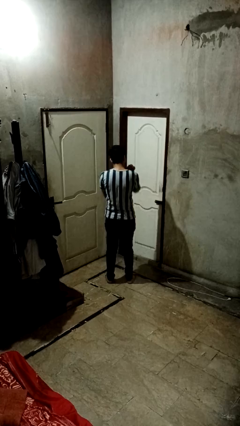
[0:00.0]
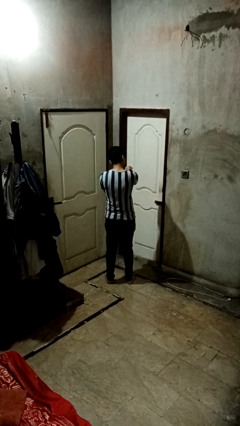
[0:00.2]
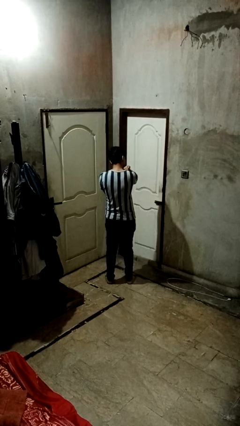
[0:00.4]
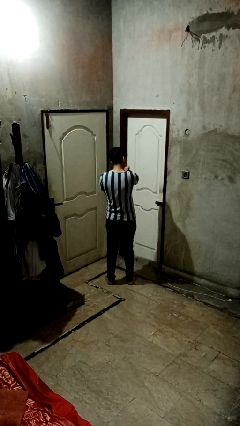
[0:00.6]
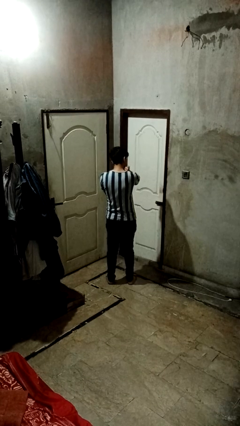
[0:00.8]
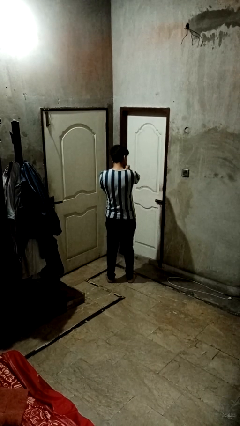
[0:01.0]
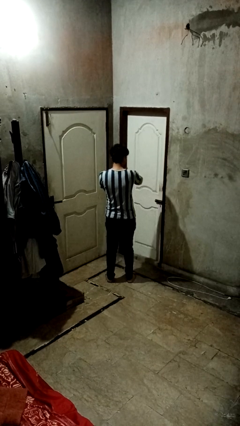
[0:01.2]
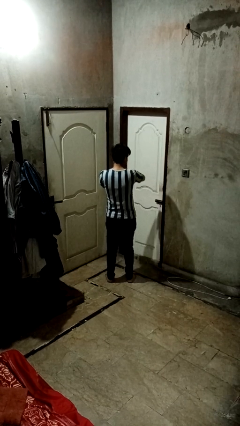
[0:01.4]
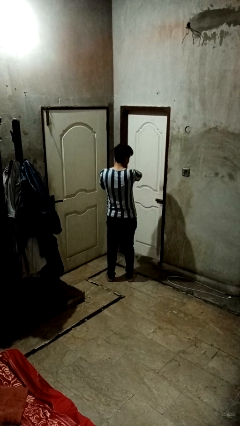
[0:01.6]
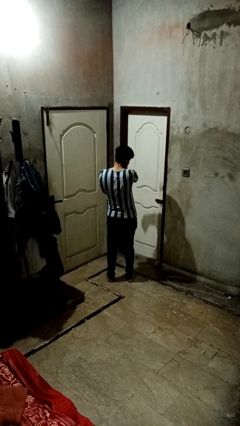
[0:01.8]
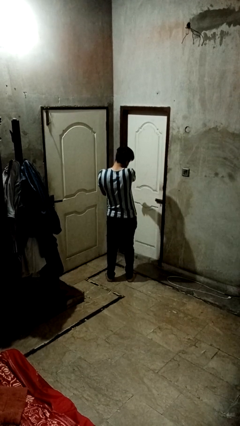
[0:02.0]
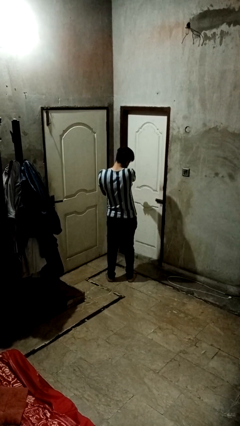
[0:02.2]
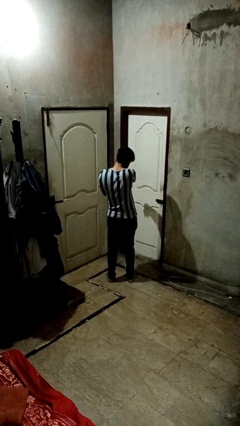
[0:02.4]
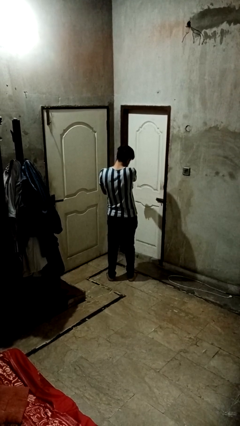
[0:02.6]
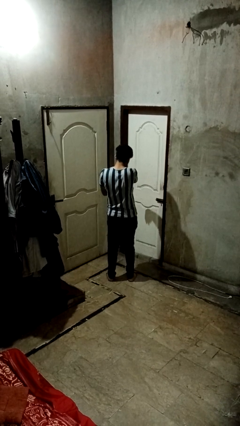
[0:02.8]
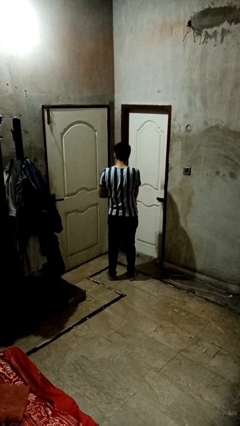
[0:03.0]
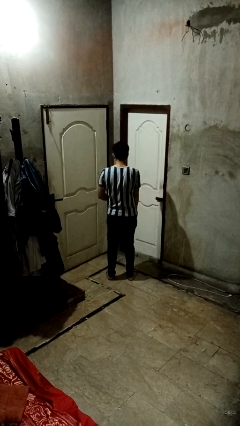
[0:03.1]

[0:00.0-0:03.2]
person swats bug

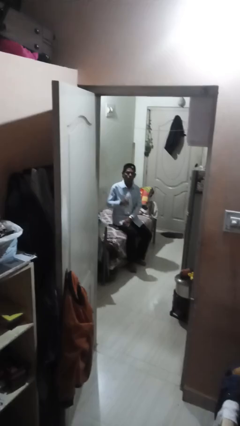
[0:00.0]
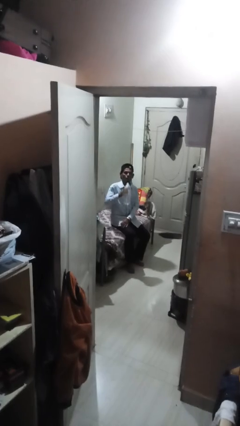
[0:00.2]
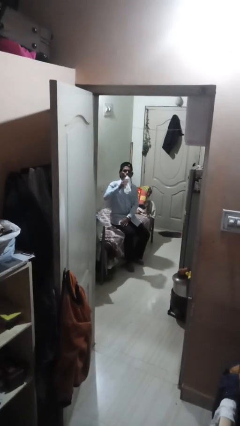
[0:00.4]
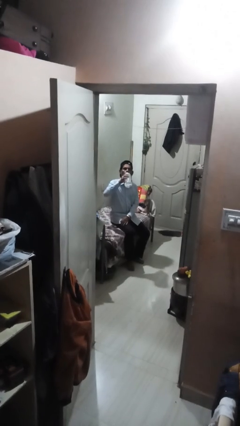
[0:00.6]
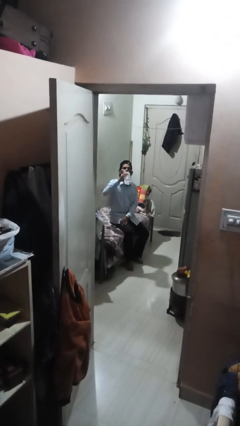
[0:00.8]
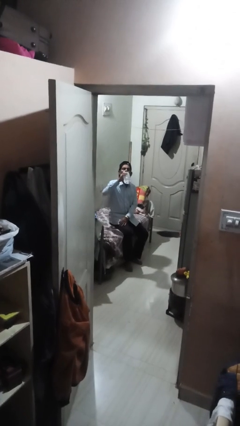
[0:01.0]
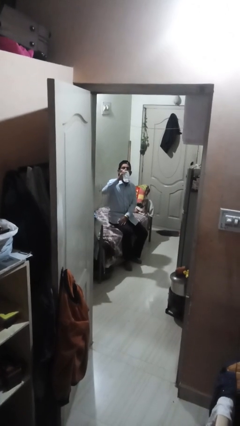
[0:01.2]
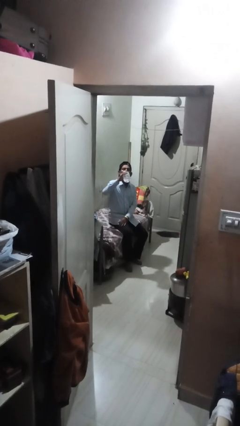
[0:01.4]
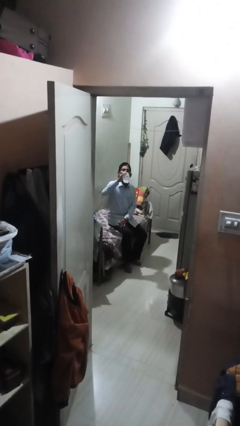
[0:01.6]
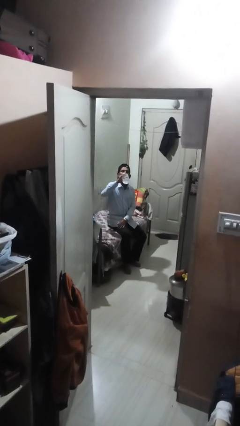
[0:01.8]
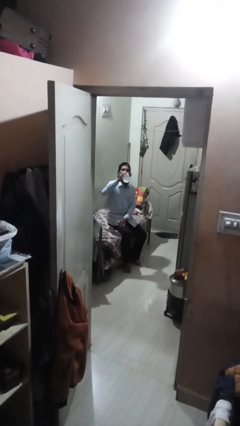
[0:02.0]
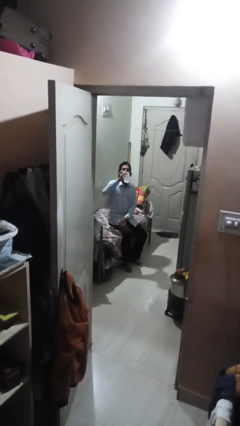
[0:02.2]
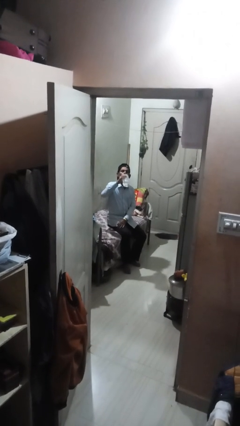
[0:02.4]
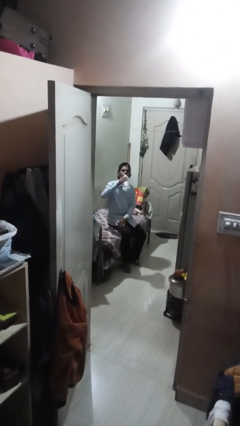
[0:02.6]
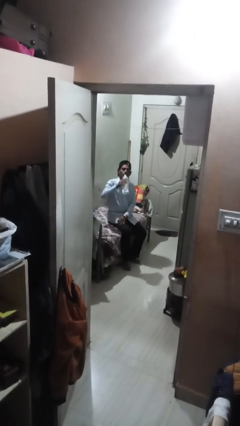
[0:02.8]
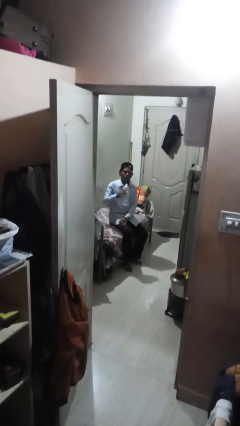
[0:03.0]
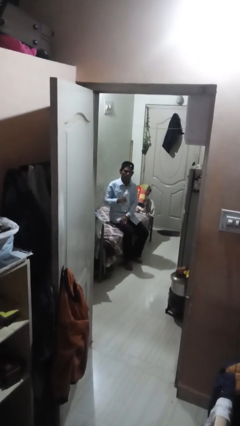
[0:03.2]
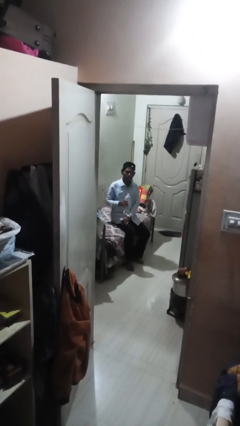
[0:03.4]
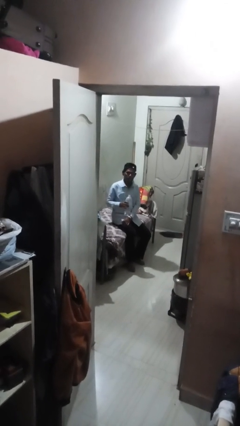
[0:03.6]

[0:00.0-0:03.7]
person drinks from bottle

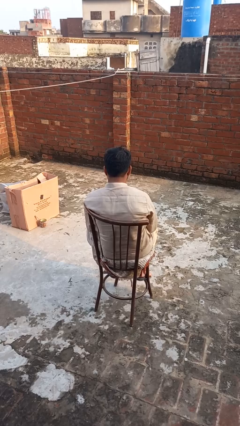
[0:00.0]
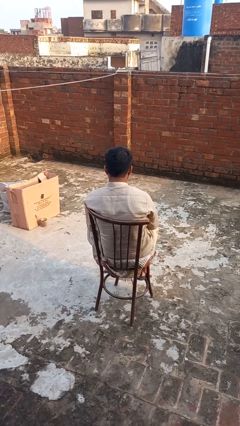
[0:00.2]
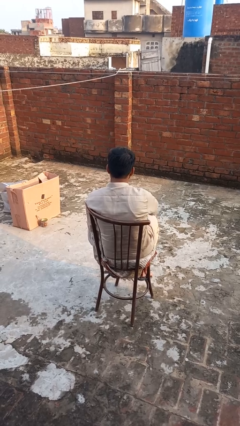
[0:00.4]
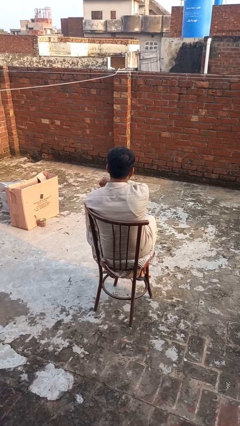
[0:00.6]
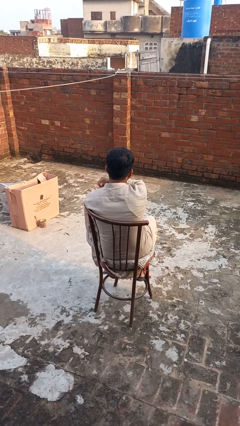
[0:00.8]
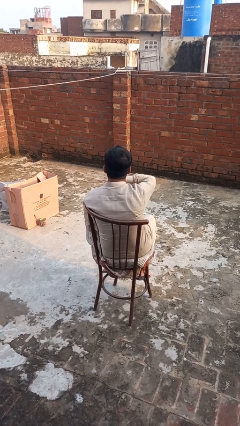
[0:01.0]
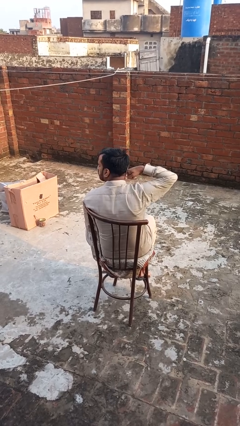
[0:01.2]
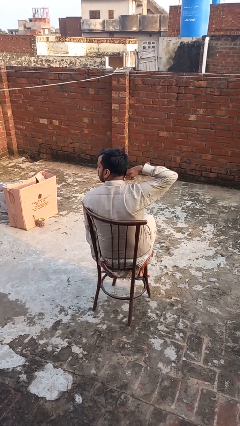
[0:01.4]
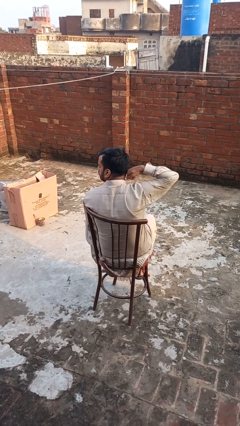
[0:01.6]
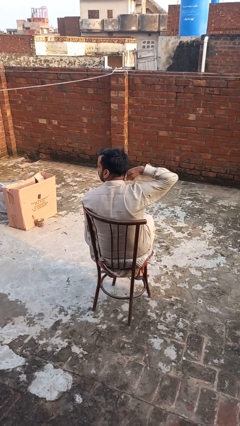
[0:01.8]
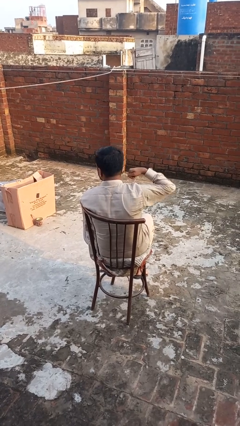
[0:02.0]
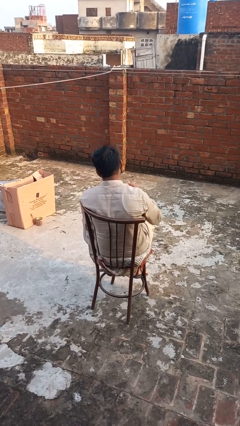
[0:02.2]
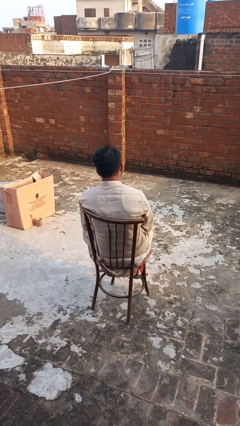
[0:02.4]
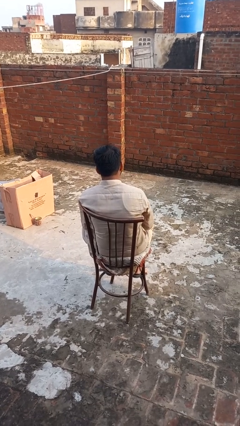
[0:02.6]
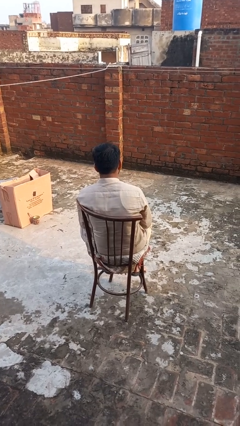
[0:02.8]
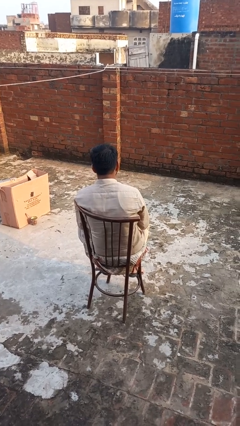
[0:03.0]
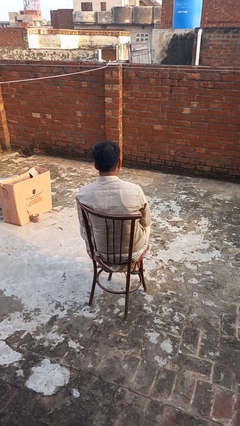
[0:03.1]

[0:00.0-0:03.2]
person gestures cut

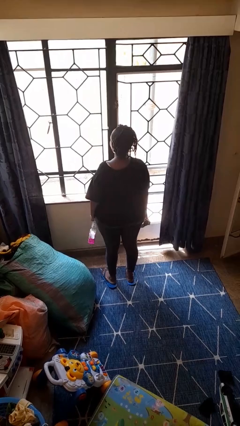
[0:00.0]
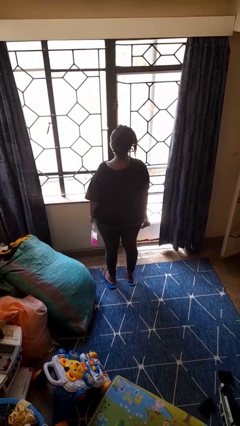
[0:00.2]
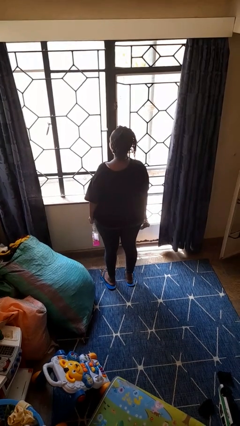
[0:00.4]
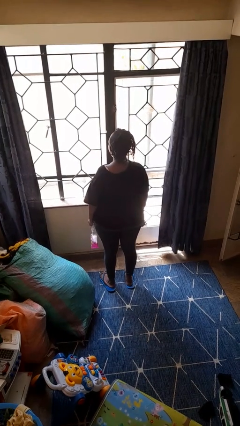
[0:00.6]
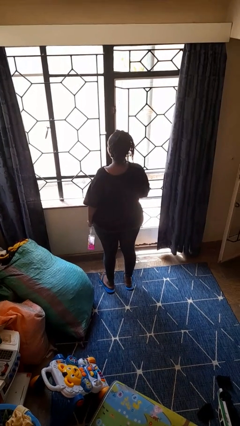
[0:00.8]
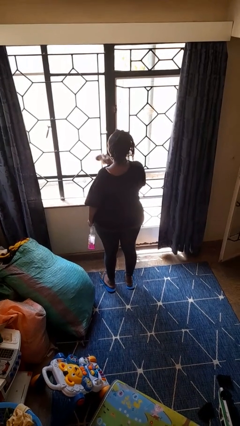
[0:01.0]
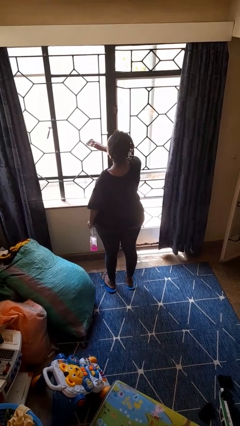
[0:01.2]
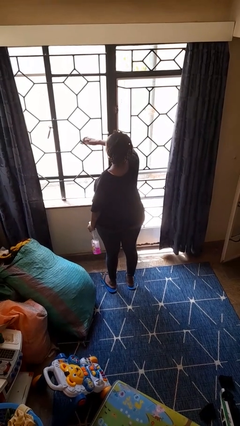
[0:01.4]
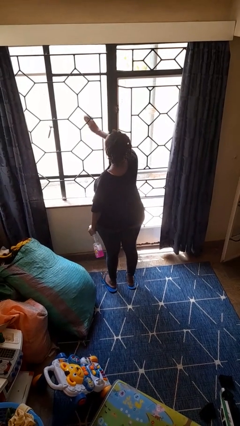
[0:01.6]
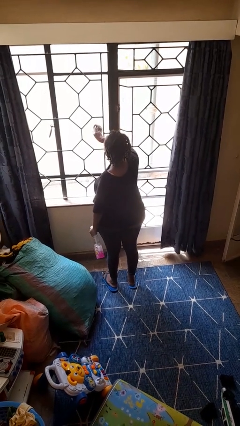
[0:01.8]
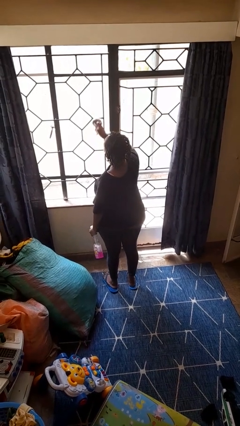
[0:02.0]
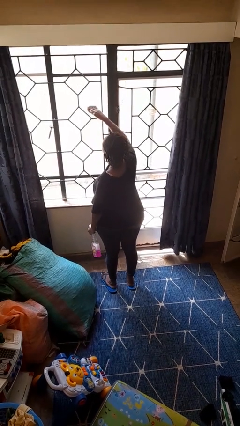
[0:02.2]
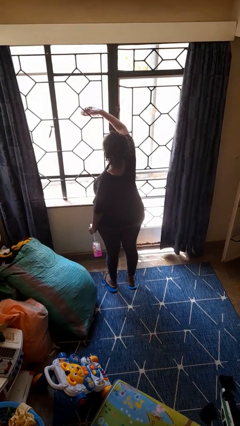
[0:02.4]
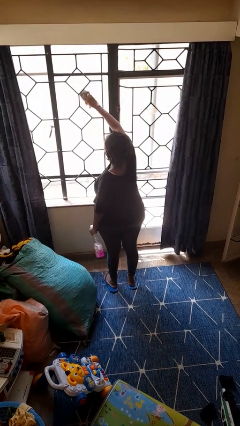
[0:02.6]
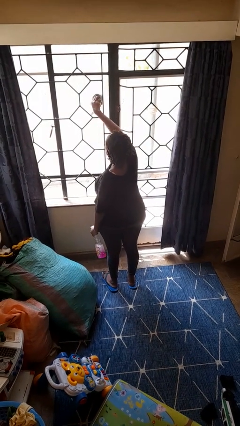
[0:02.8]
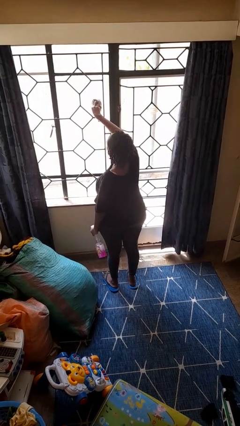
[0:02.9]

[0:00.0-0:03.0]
person washes window

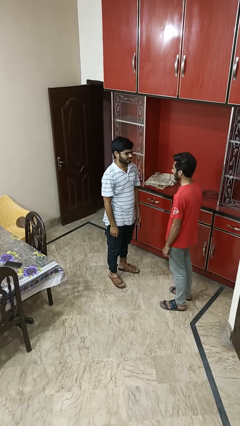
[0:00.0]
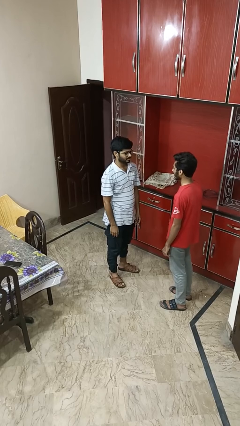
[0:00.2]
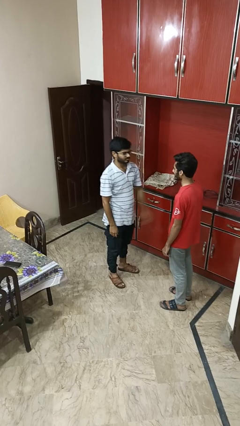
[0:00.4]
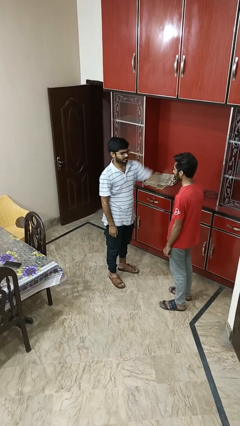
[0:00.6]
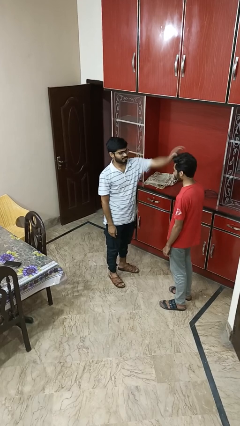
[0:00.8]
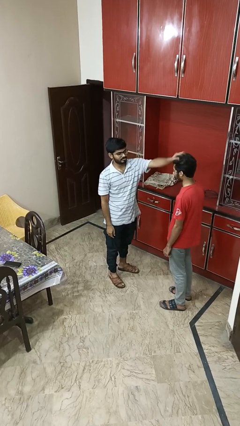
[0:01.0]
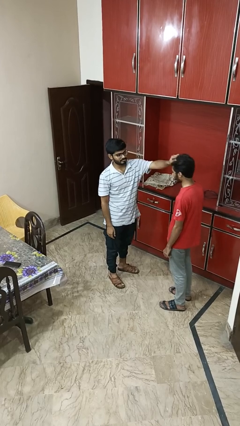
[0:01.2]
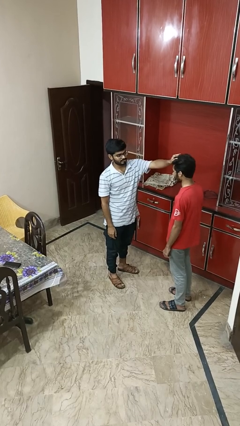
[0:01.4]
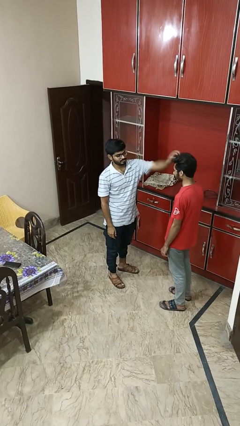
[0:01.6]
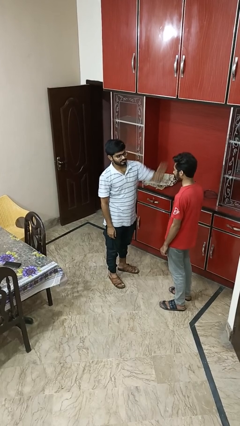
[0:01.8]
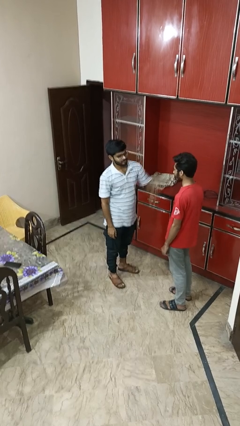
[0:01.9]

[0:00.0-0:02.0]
person grabs person by hair

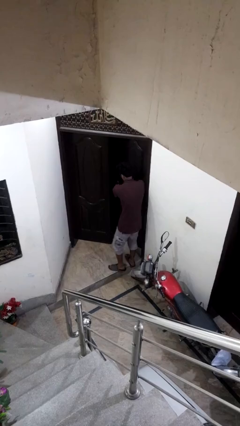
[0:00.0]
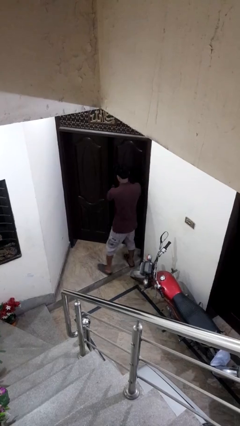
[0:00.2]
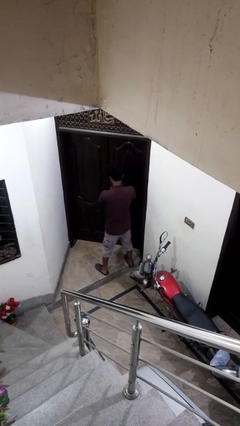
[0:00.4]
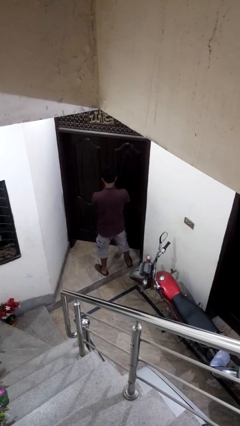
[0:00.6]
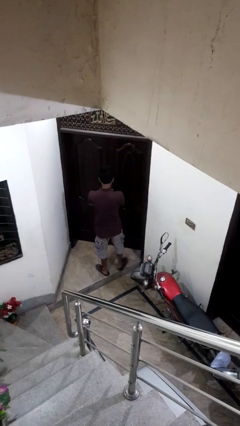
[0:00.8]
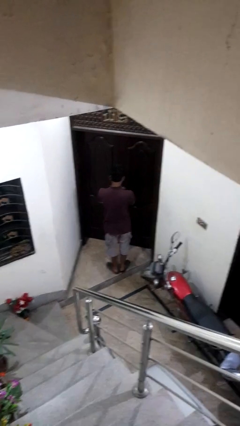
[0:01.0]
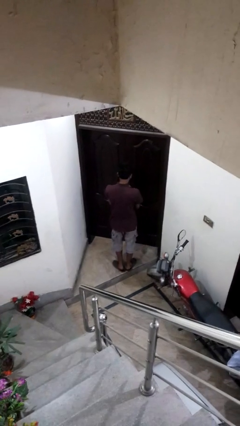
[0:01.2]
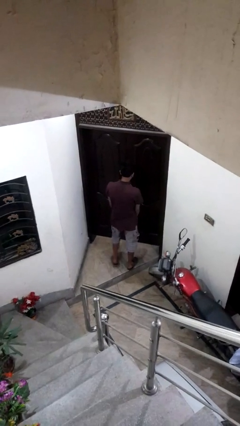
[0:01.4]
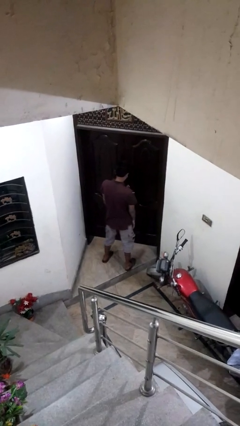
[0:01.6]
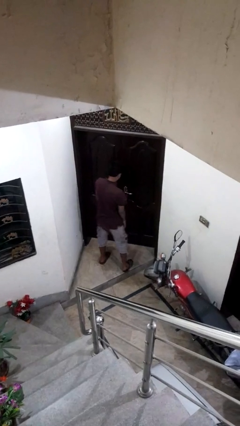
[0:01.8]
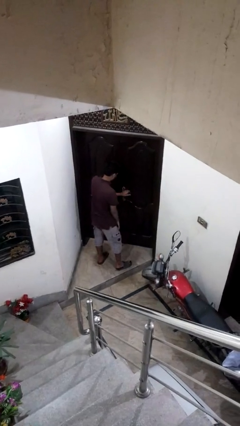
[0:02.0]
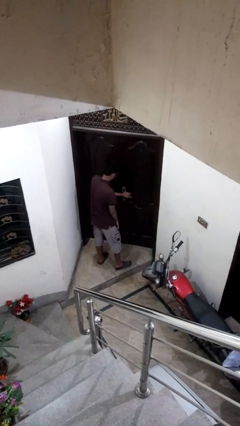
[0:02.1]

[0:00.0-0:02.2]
person closes facility door

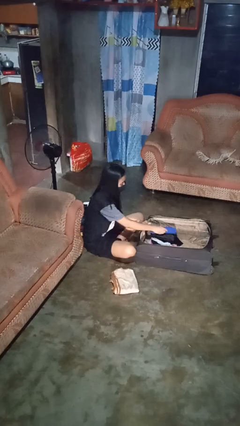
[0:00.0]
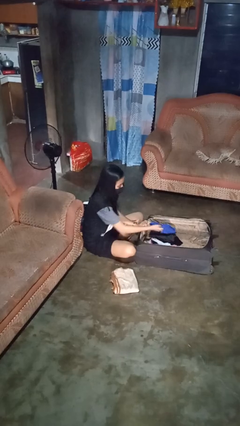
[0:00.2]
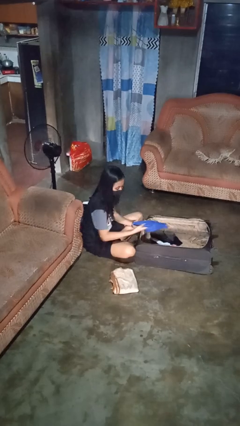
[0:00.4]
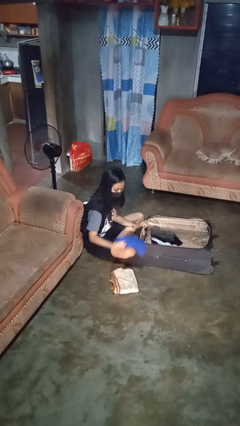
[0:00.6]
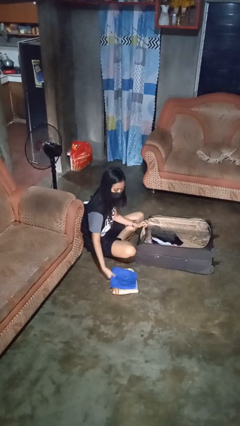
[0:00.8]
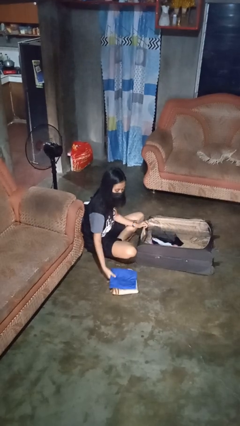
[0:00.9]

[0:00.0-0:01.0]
person unloads clothes from suitcase
